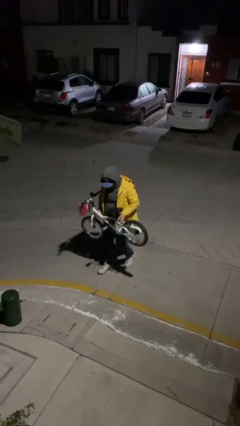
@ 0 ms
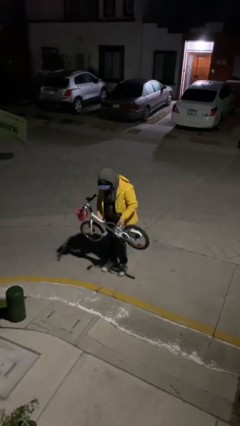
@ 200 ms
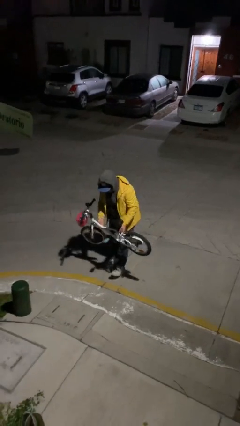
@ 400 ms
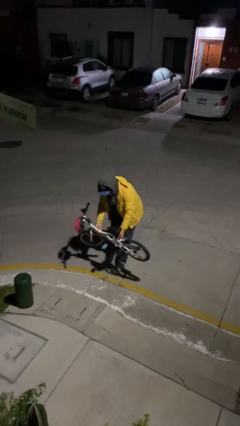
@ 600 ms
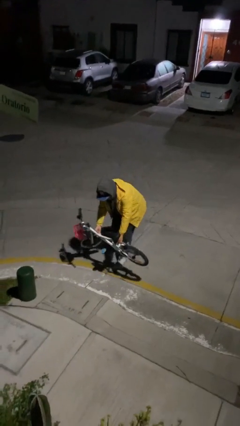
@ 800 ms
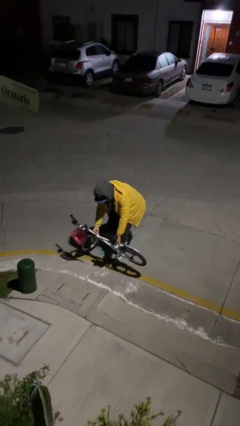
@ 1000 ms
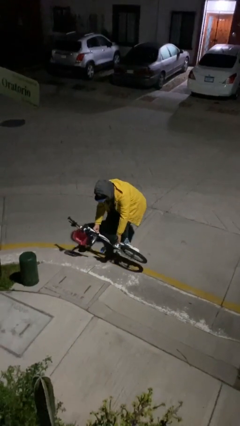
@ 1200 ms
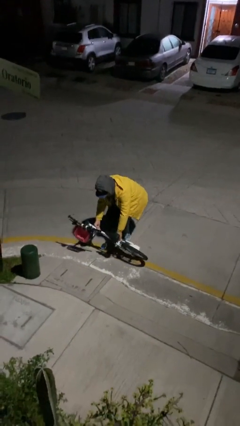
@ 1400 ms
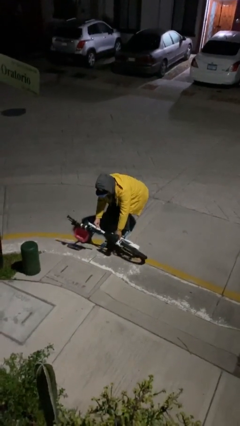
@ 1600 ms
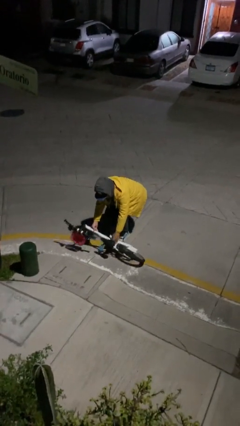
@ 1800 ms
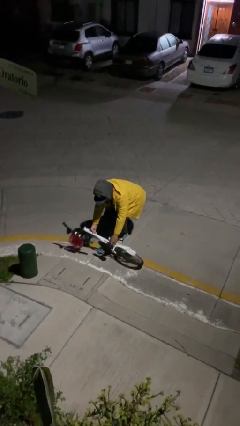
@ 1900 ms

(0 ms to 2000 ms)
person puts down object on floor

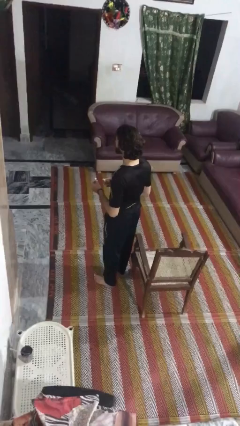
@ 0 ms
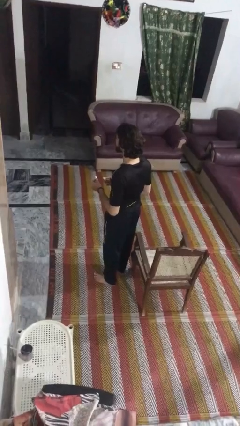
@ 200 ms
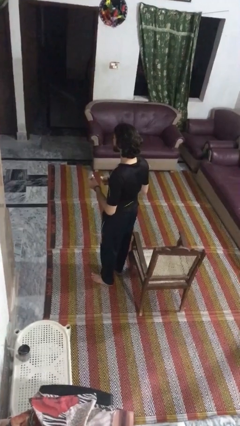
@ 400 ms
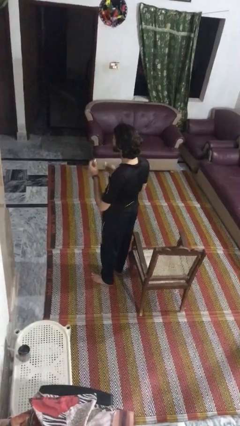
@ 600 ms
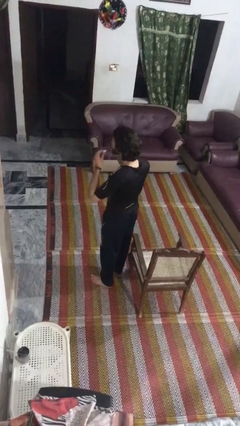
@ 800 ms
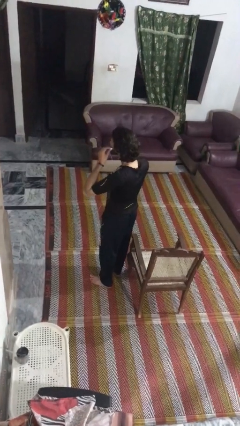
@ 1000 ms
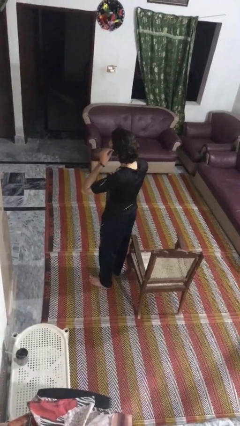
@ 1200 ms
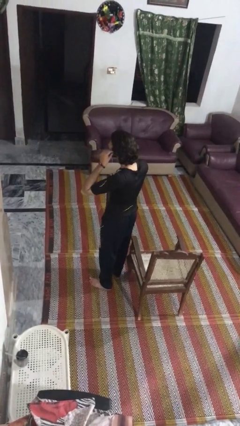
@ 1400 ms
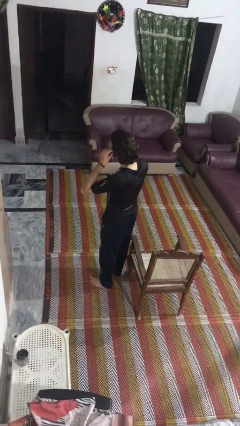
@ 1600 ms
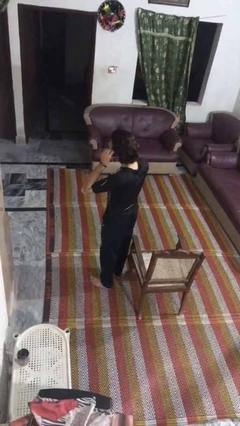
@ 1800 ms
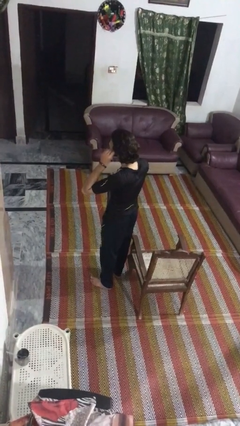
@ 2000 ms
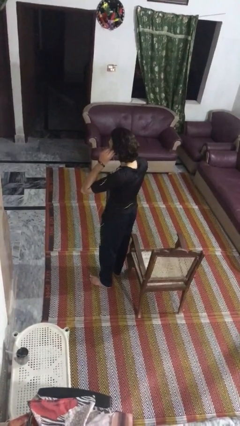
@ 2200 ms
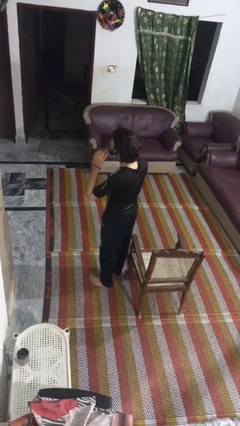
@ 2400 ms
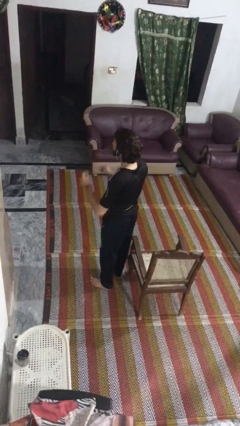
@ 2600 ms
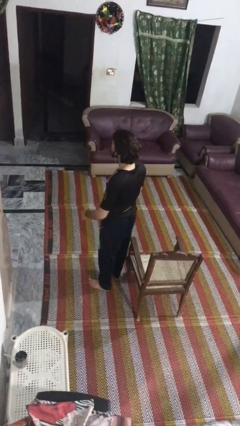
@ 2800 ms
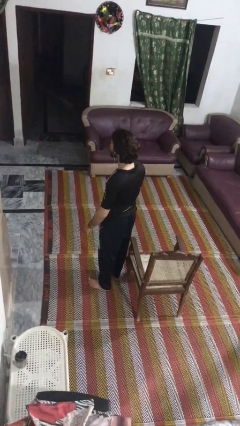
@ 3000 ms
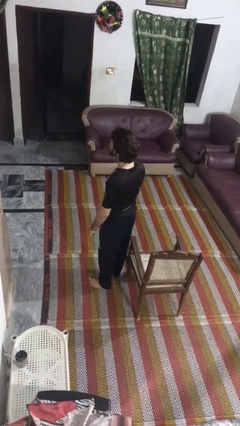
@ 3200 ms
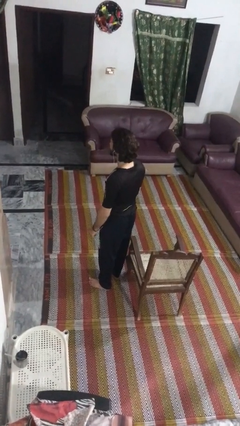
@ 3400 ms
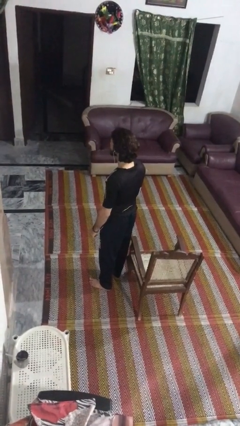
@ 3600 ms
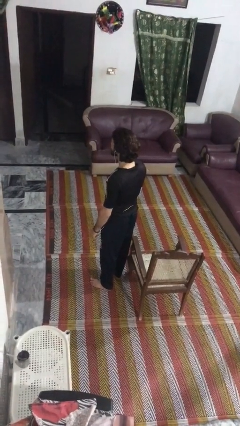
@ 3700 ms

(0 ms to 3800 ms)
person puts on headphones

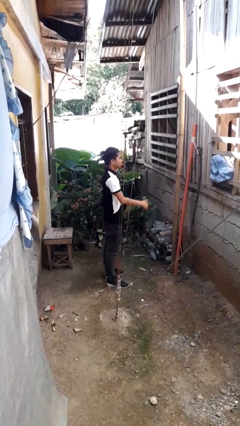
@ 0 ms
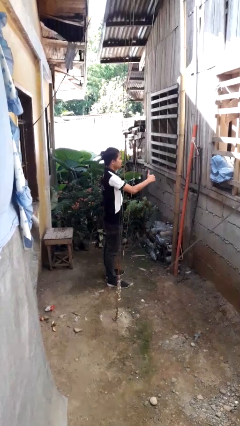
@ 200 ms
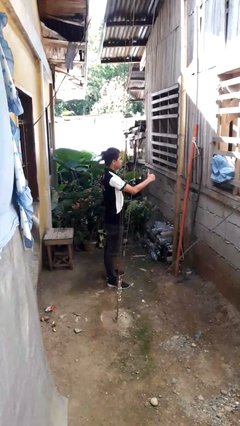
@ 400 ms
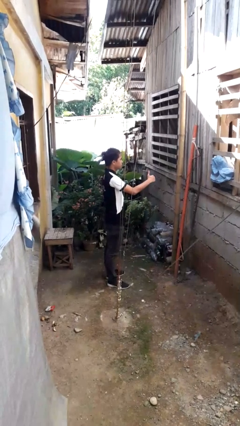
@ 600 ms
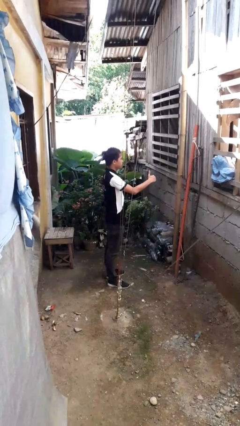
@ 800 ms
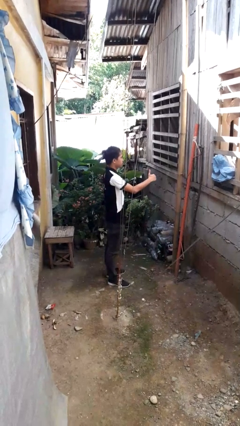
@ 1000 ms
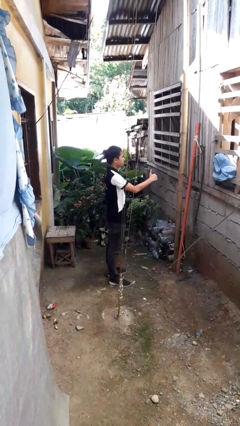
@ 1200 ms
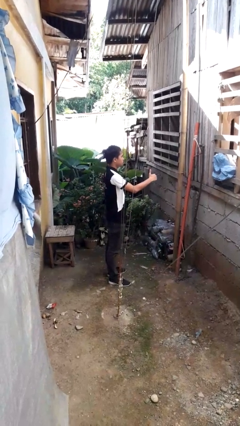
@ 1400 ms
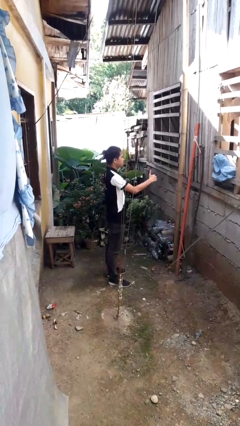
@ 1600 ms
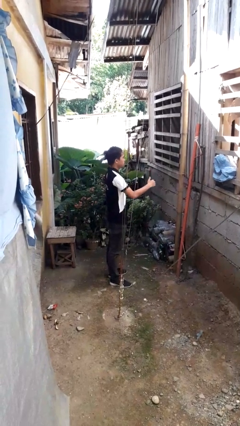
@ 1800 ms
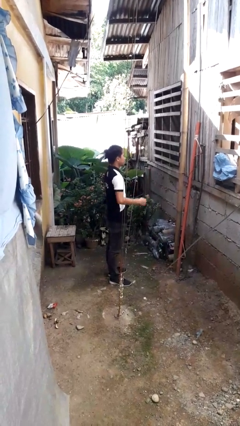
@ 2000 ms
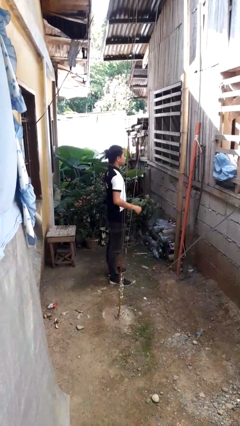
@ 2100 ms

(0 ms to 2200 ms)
person gestures thumbs up

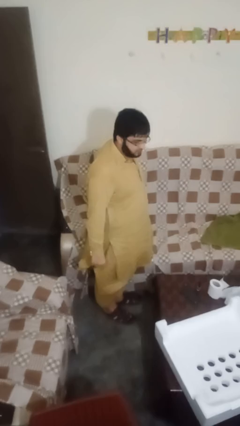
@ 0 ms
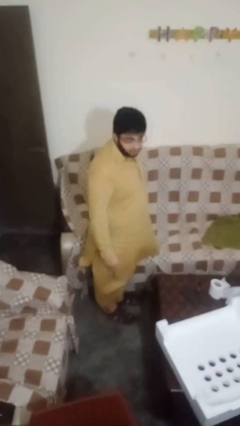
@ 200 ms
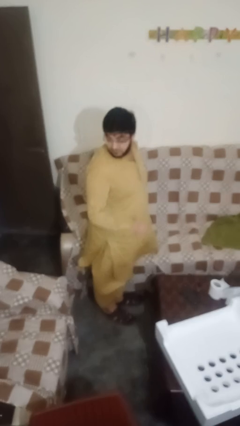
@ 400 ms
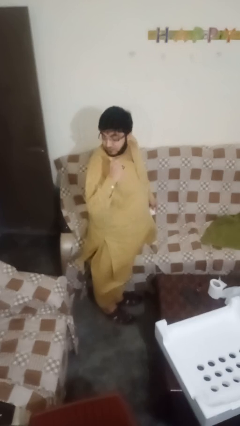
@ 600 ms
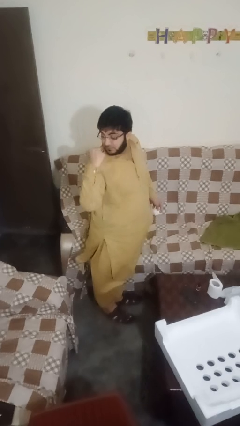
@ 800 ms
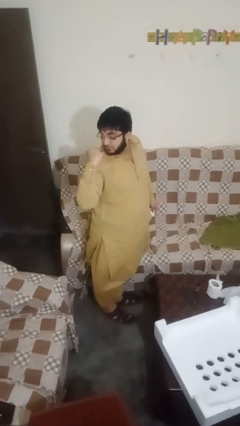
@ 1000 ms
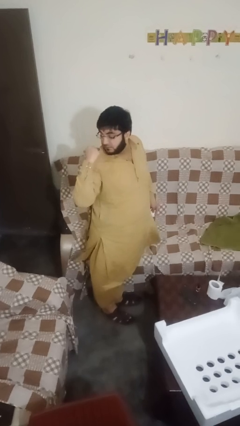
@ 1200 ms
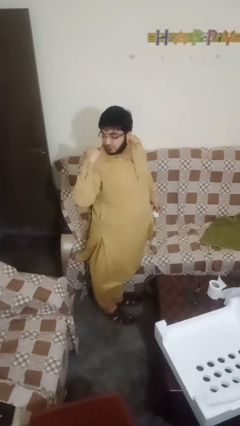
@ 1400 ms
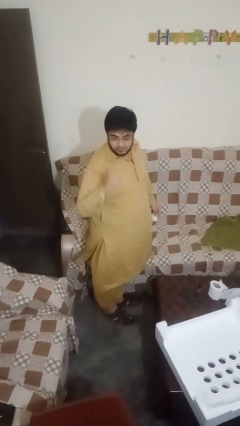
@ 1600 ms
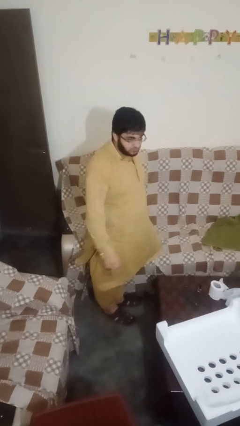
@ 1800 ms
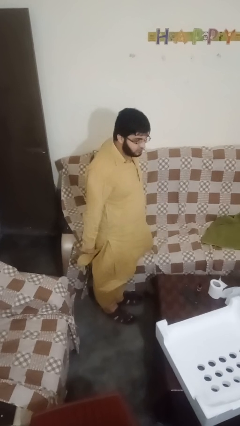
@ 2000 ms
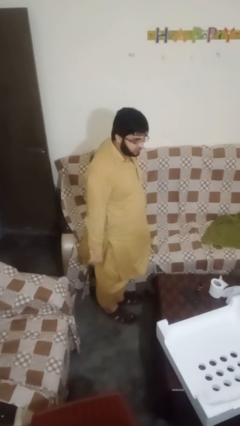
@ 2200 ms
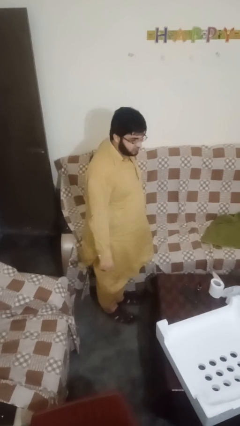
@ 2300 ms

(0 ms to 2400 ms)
person gestures behind me

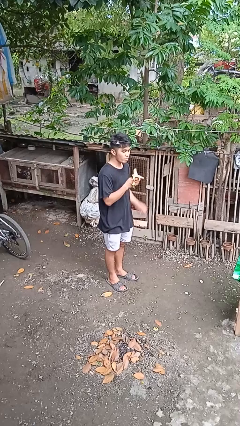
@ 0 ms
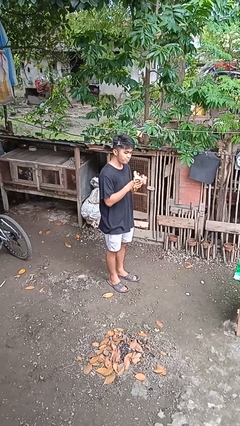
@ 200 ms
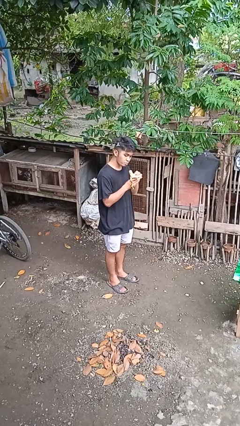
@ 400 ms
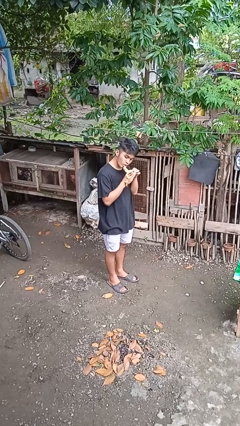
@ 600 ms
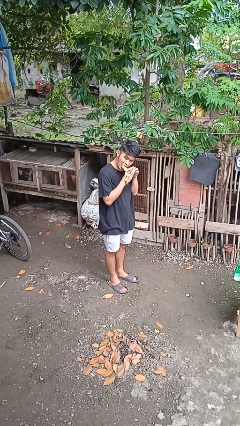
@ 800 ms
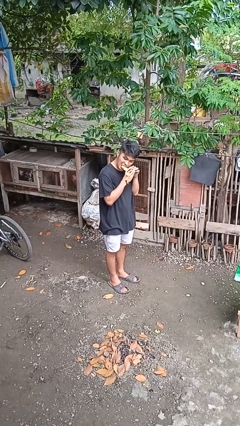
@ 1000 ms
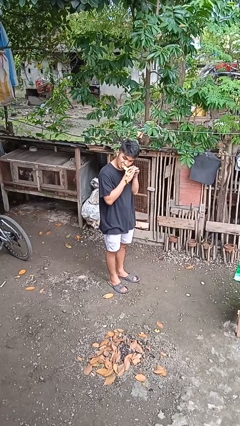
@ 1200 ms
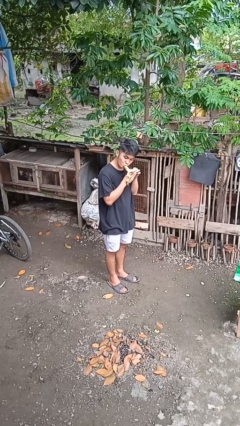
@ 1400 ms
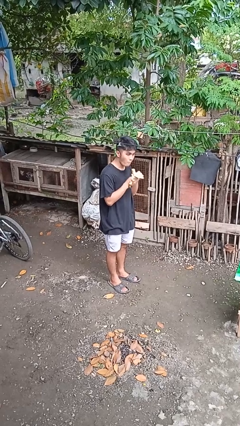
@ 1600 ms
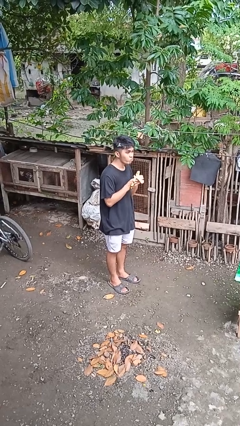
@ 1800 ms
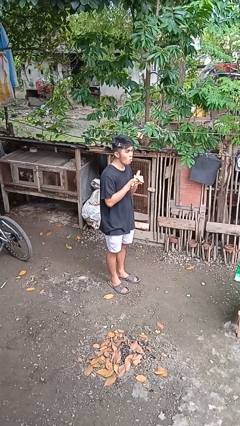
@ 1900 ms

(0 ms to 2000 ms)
person eats banana

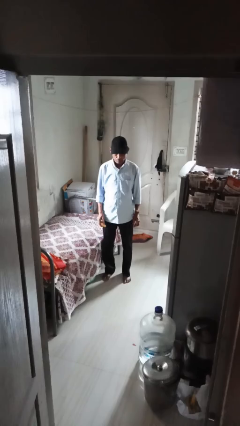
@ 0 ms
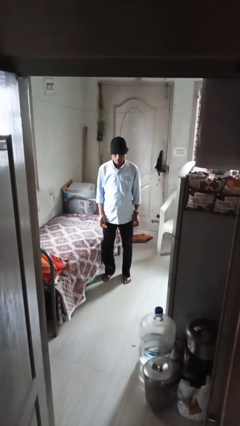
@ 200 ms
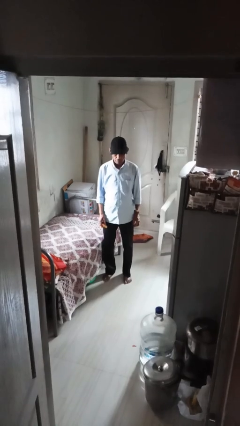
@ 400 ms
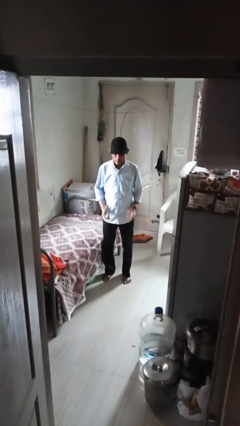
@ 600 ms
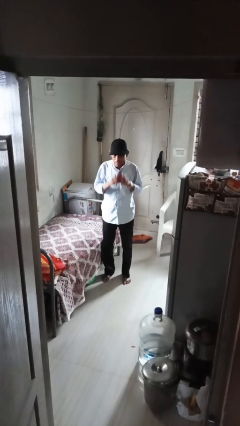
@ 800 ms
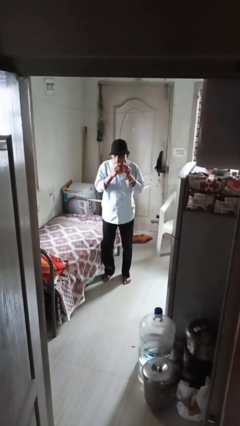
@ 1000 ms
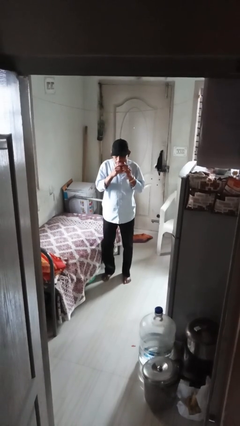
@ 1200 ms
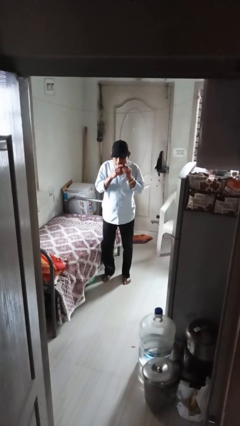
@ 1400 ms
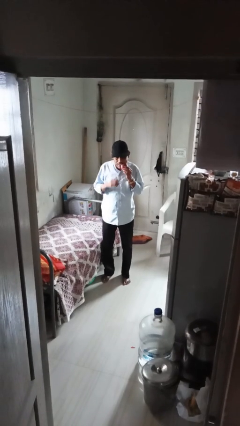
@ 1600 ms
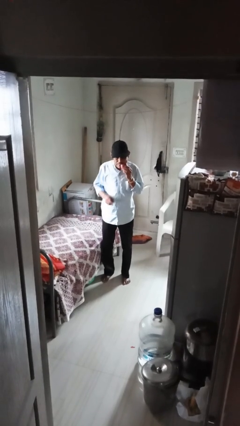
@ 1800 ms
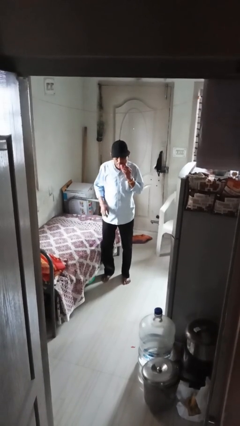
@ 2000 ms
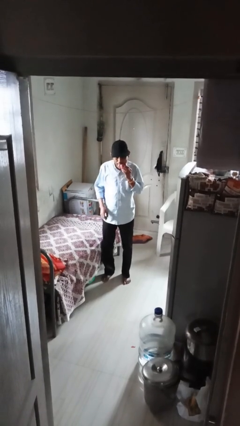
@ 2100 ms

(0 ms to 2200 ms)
person eats apple

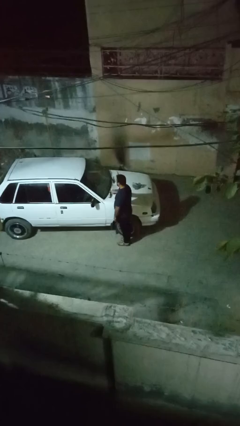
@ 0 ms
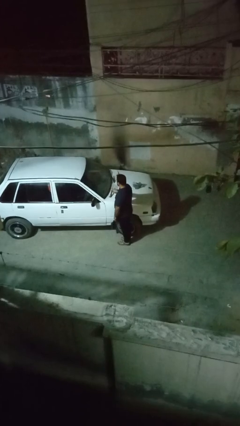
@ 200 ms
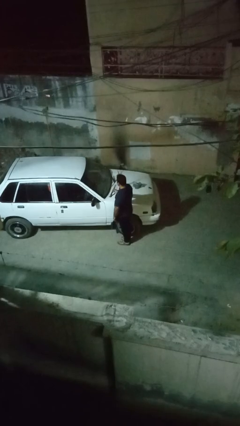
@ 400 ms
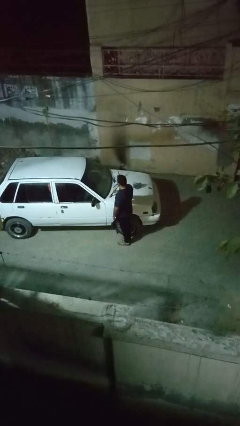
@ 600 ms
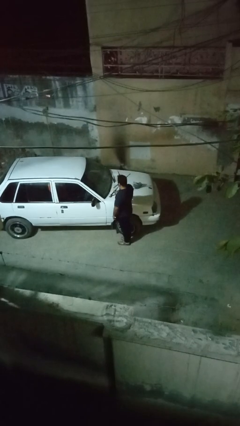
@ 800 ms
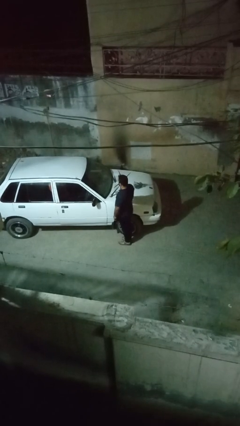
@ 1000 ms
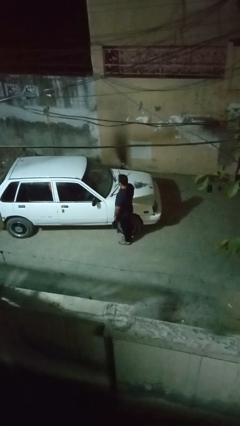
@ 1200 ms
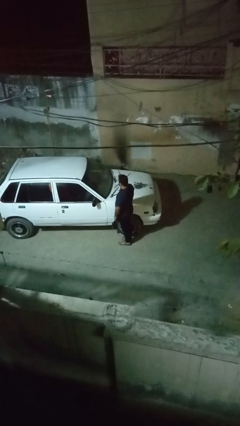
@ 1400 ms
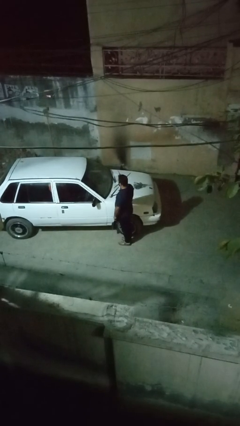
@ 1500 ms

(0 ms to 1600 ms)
person flips up car wipers

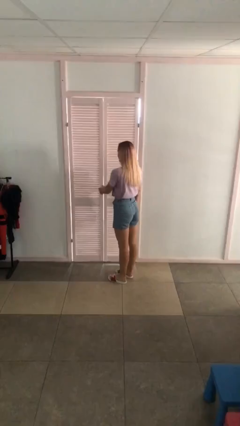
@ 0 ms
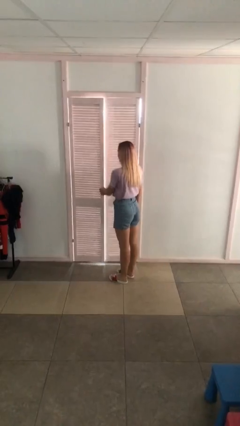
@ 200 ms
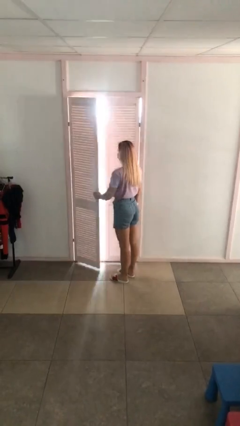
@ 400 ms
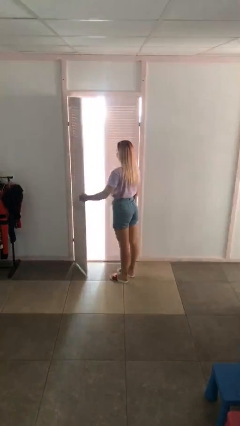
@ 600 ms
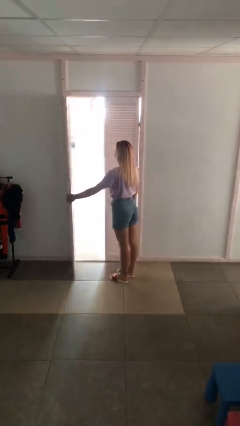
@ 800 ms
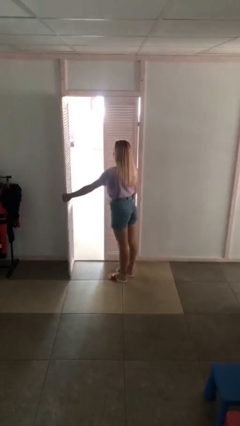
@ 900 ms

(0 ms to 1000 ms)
person opens facility door
